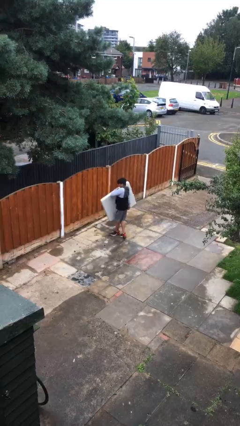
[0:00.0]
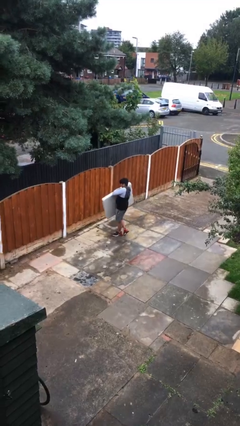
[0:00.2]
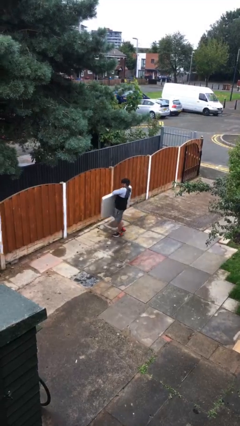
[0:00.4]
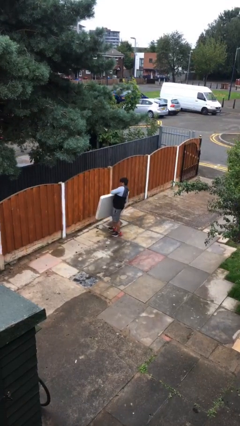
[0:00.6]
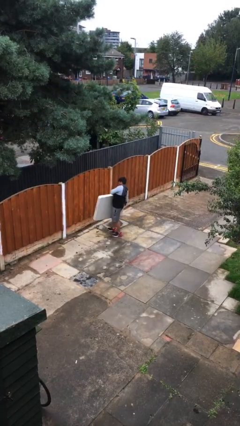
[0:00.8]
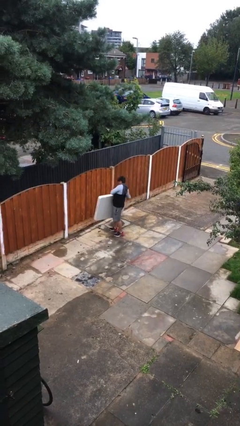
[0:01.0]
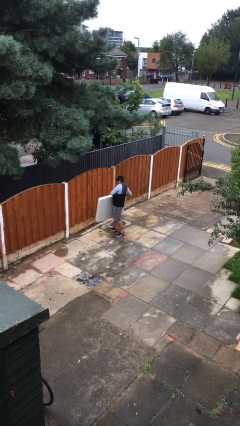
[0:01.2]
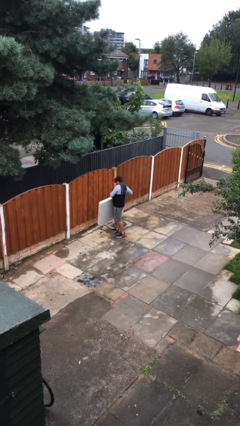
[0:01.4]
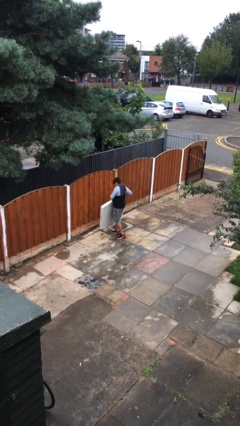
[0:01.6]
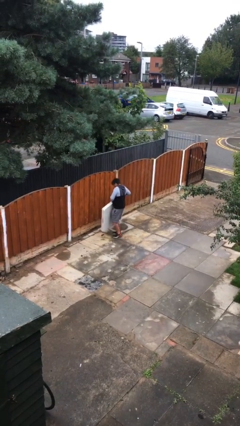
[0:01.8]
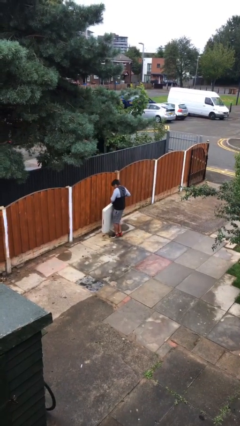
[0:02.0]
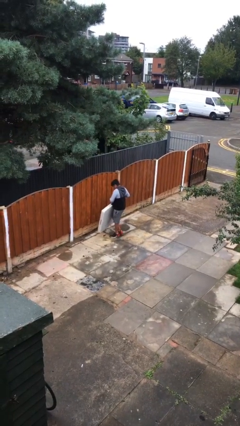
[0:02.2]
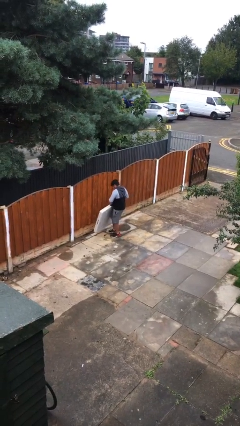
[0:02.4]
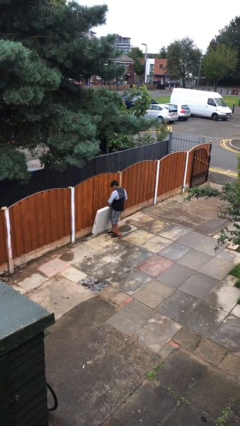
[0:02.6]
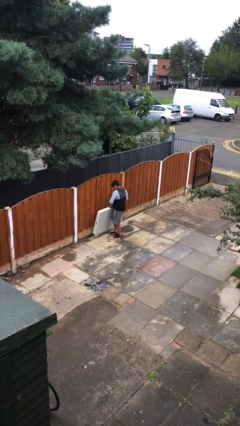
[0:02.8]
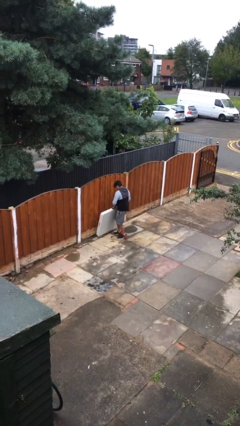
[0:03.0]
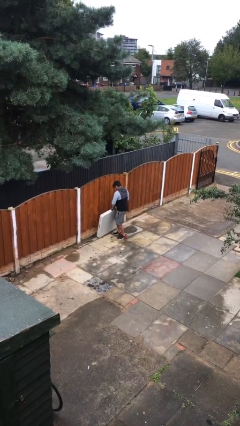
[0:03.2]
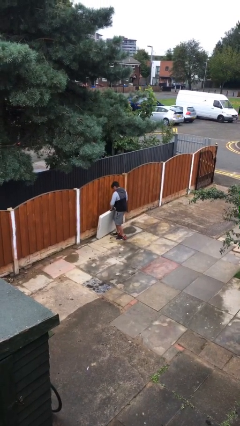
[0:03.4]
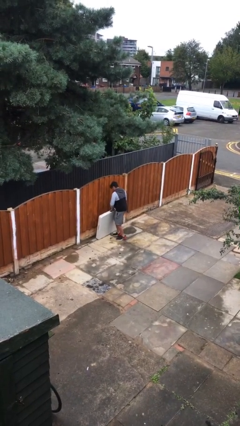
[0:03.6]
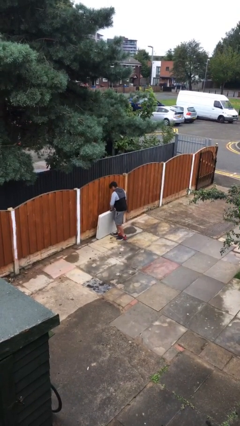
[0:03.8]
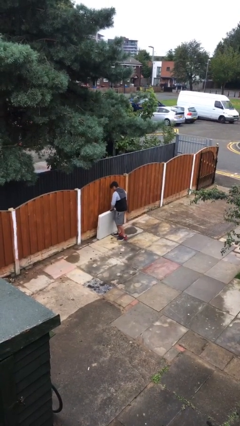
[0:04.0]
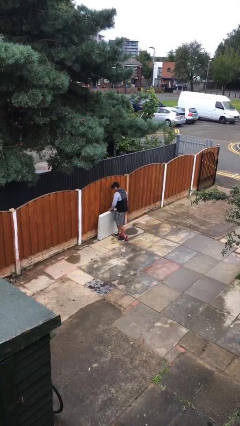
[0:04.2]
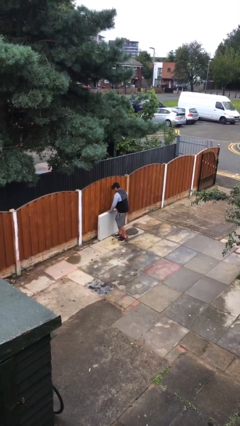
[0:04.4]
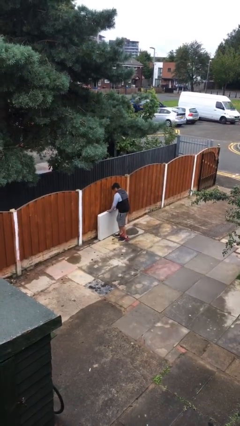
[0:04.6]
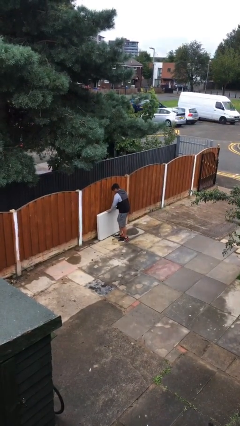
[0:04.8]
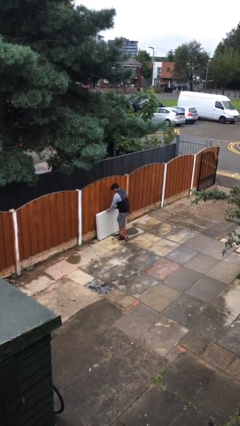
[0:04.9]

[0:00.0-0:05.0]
person puts down object on floor

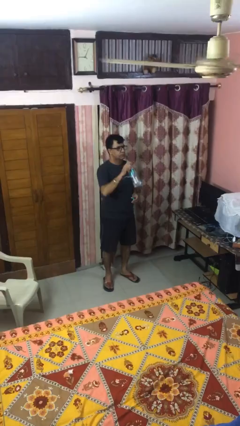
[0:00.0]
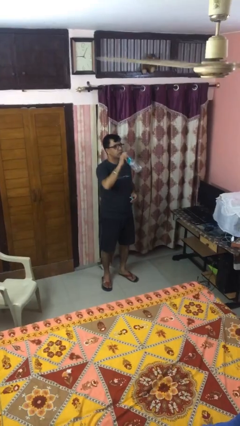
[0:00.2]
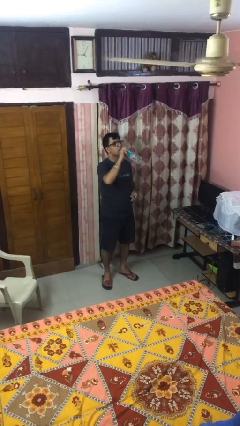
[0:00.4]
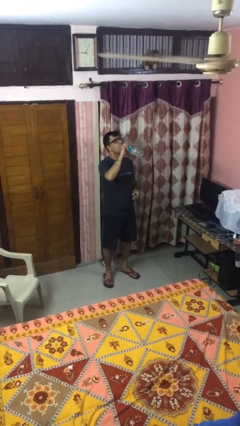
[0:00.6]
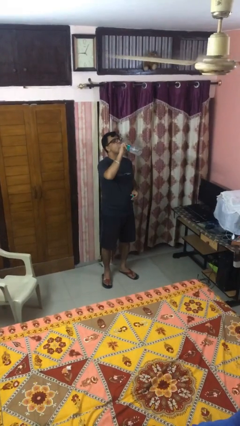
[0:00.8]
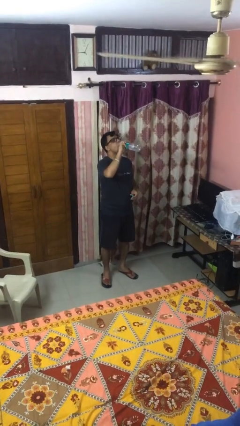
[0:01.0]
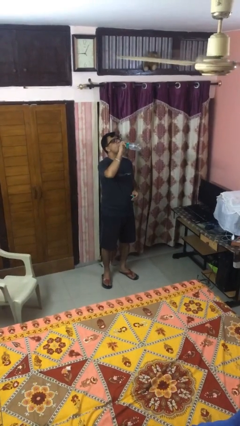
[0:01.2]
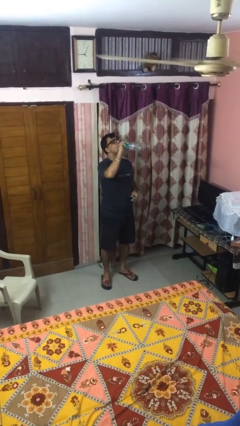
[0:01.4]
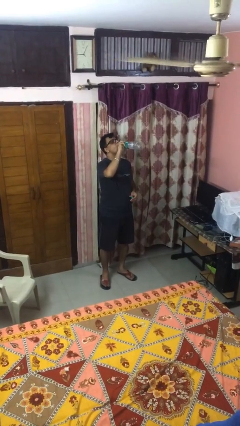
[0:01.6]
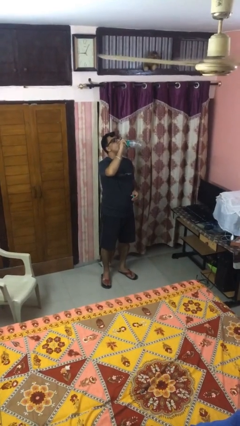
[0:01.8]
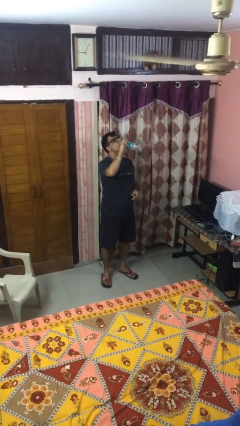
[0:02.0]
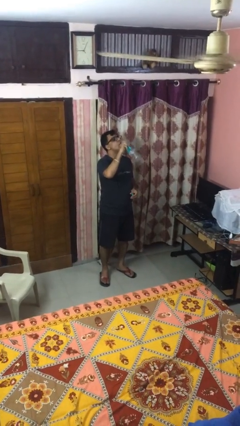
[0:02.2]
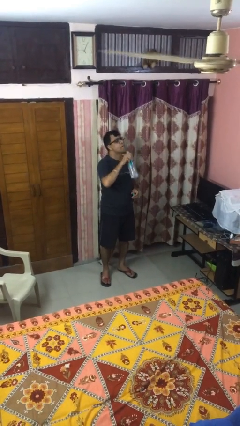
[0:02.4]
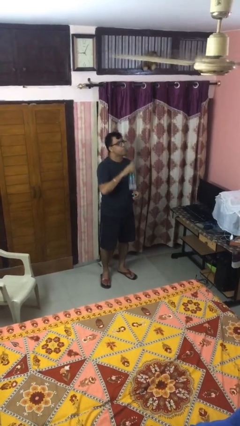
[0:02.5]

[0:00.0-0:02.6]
person drinks from bottle

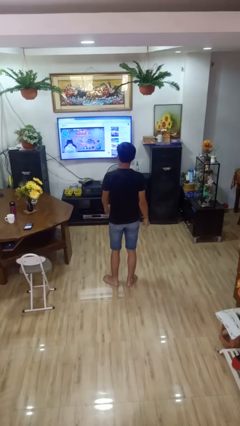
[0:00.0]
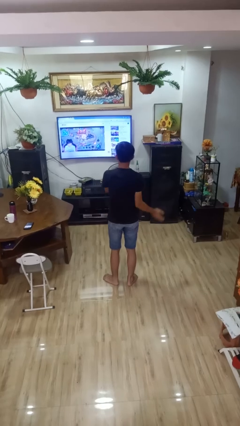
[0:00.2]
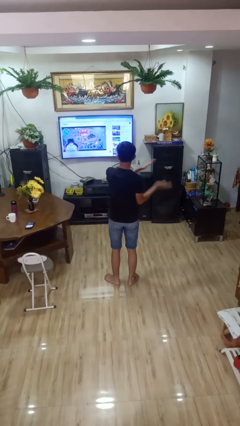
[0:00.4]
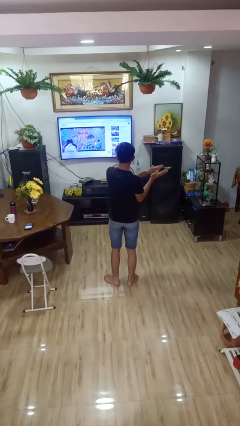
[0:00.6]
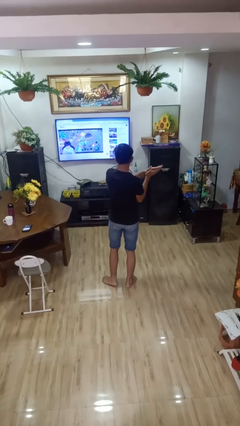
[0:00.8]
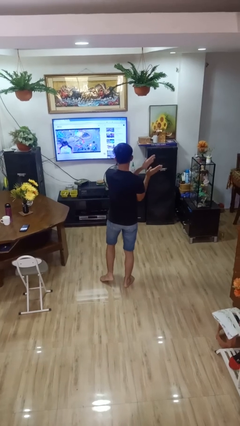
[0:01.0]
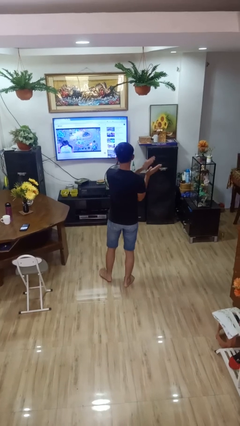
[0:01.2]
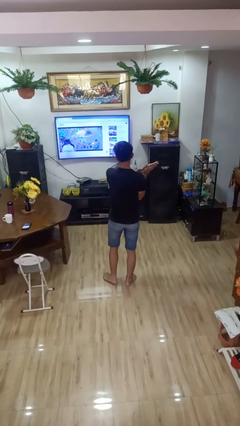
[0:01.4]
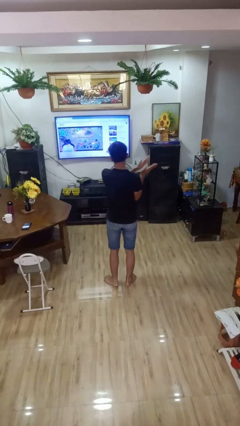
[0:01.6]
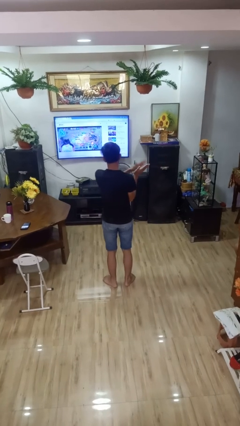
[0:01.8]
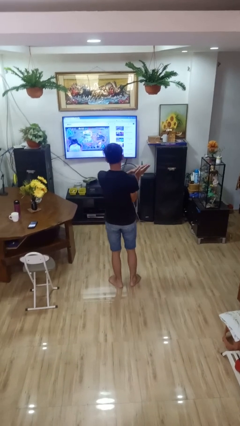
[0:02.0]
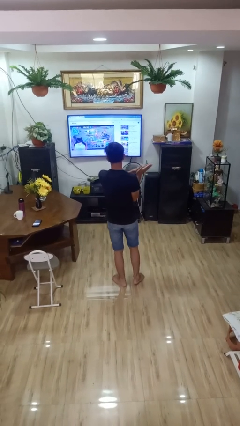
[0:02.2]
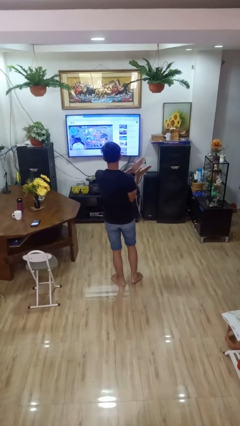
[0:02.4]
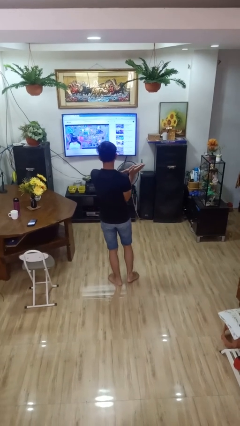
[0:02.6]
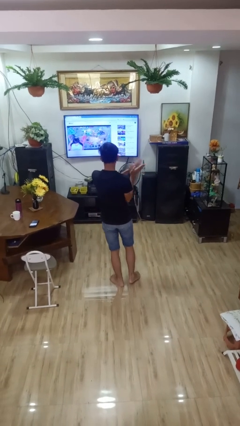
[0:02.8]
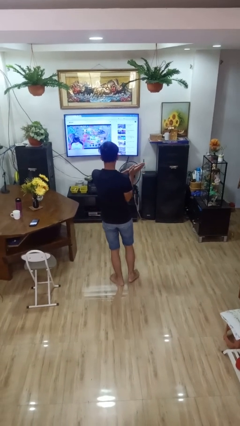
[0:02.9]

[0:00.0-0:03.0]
person claps hands

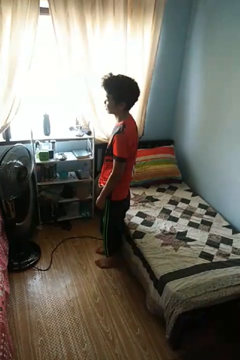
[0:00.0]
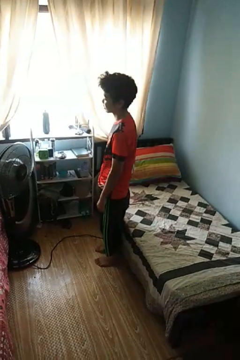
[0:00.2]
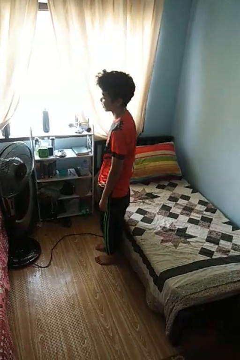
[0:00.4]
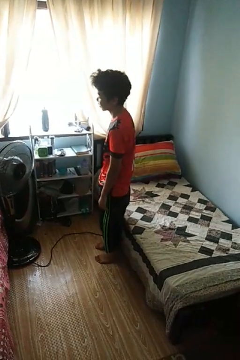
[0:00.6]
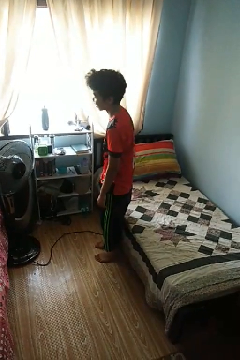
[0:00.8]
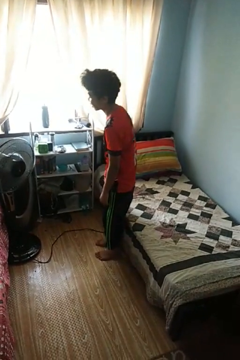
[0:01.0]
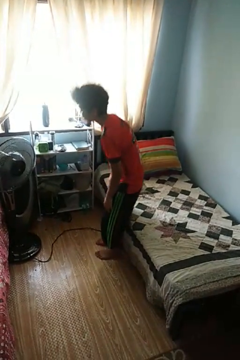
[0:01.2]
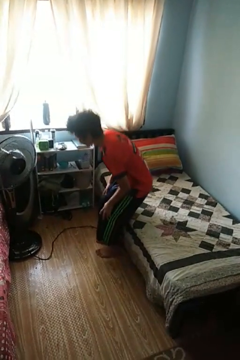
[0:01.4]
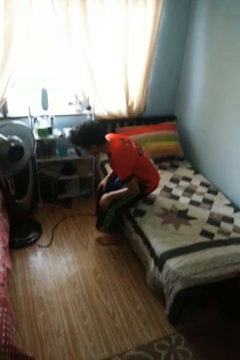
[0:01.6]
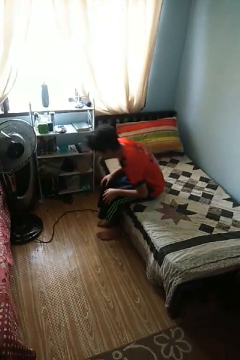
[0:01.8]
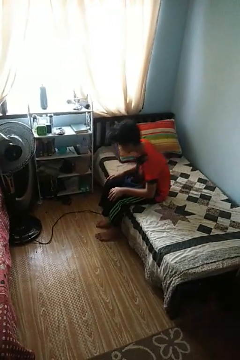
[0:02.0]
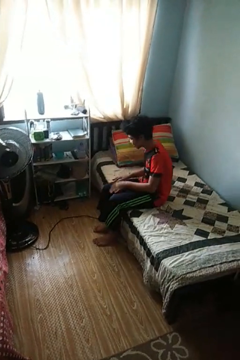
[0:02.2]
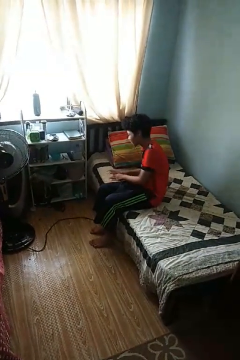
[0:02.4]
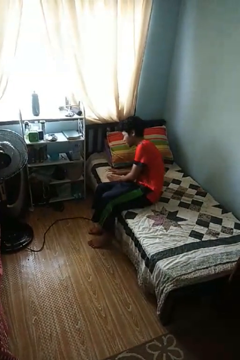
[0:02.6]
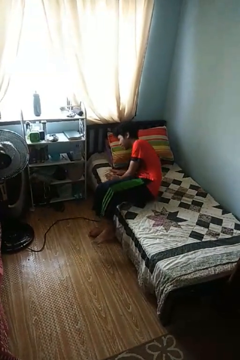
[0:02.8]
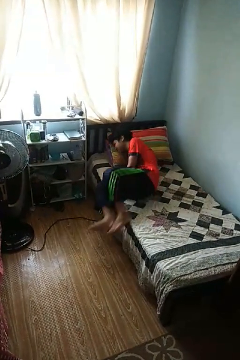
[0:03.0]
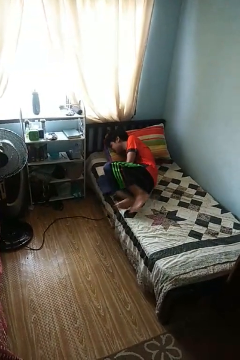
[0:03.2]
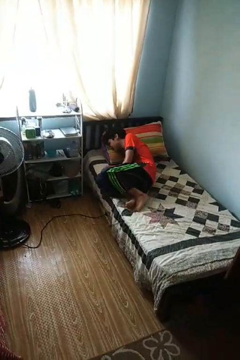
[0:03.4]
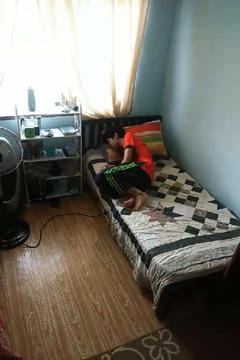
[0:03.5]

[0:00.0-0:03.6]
person lies down on bed

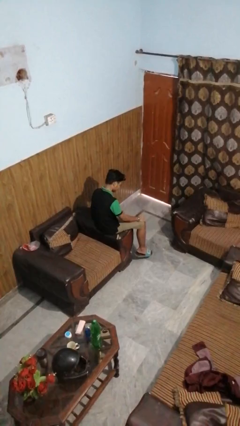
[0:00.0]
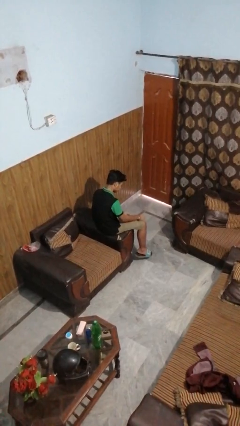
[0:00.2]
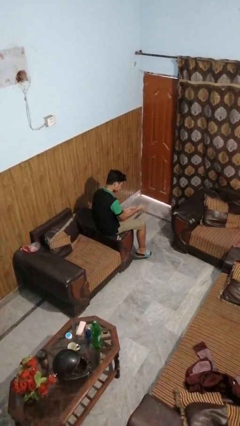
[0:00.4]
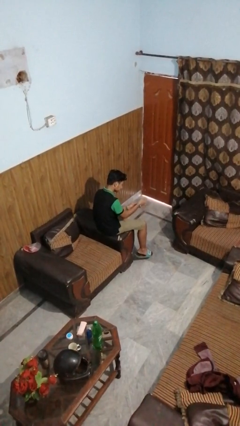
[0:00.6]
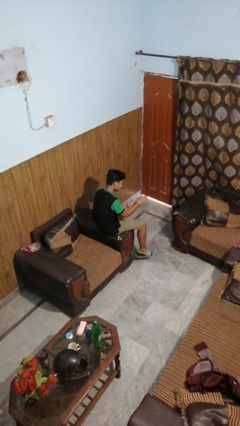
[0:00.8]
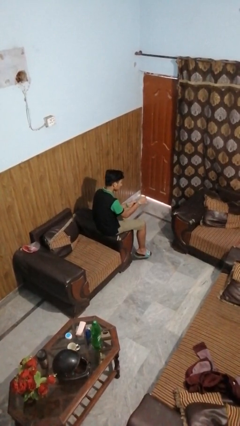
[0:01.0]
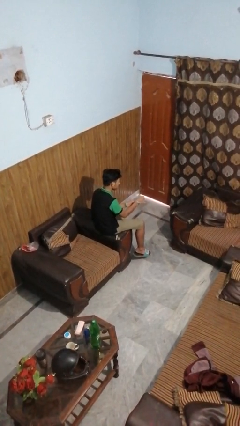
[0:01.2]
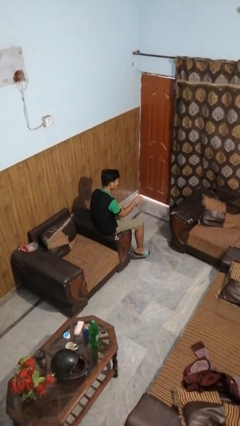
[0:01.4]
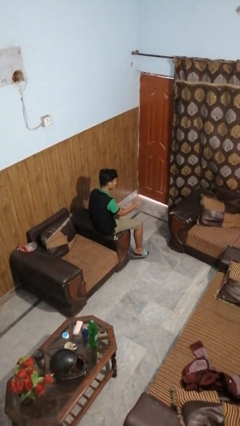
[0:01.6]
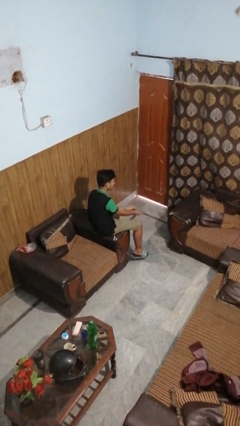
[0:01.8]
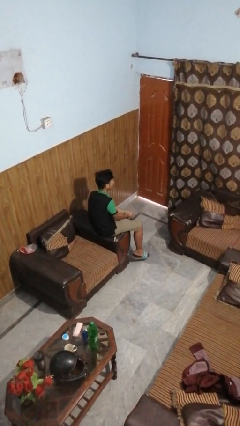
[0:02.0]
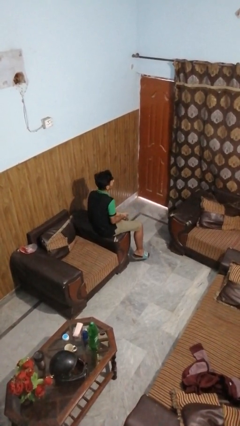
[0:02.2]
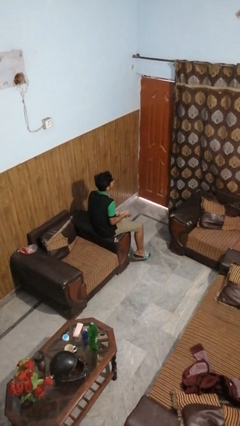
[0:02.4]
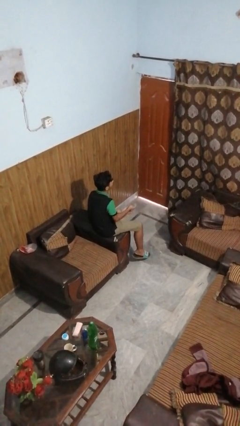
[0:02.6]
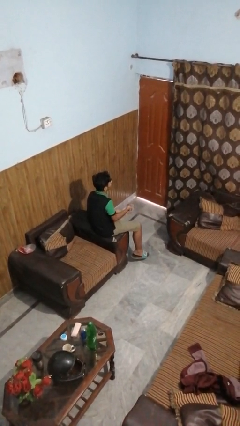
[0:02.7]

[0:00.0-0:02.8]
person takes off wristwatch

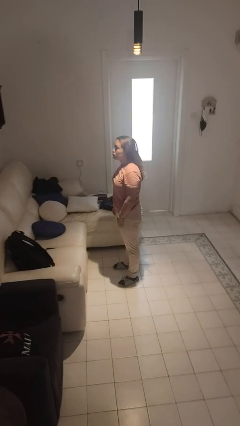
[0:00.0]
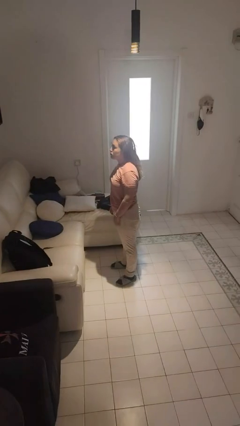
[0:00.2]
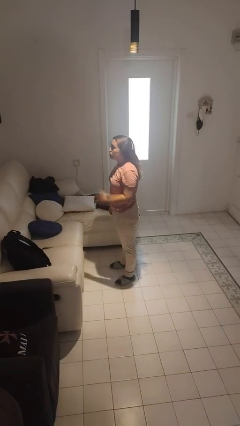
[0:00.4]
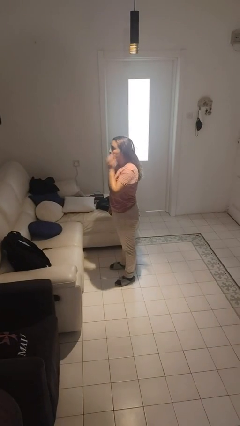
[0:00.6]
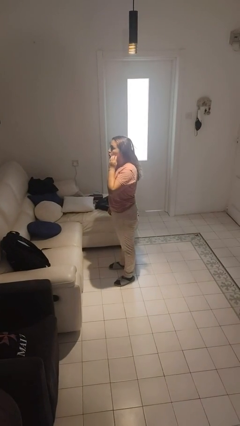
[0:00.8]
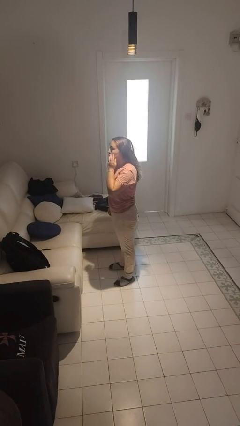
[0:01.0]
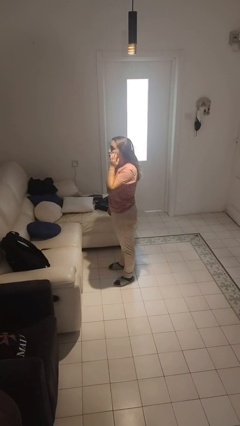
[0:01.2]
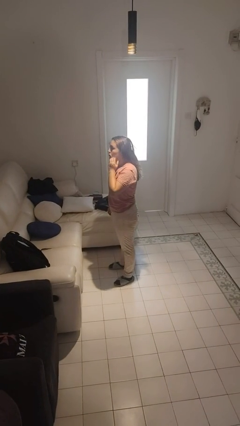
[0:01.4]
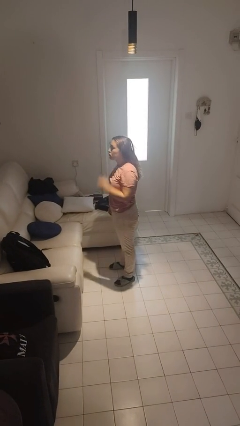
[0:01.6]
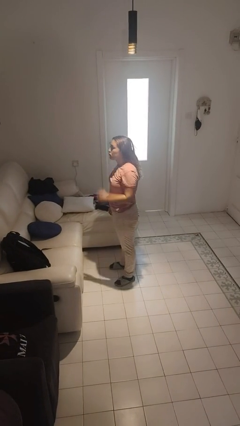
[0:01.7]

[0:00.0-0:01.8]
person scratches face
